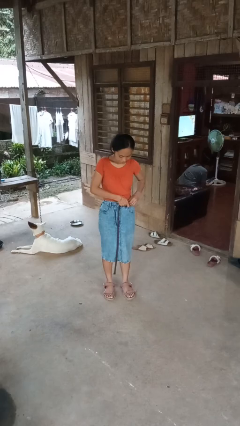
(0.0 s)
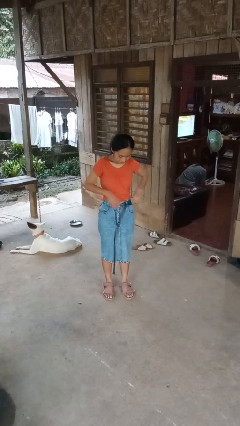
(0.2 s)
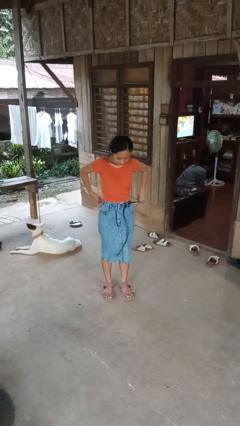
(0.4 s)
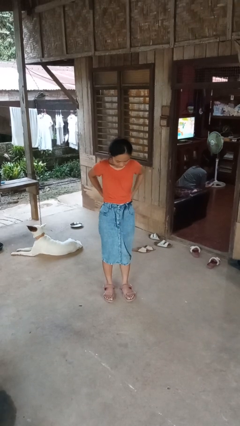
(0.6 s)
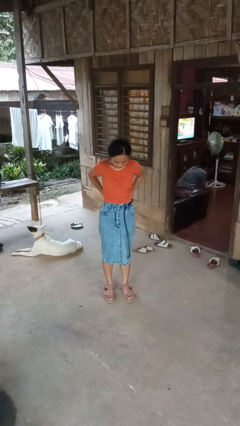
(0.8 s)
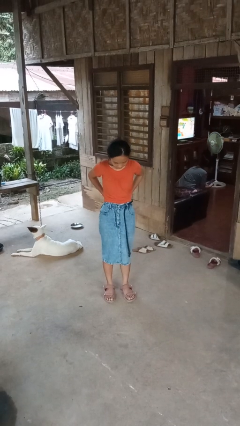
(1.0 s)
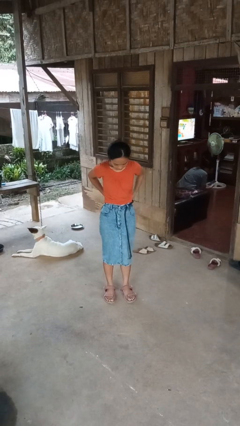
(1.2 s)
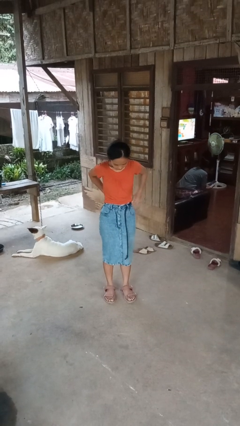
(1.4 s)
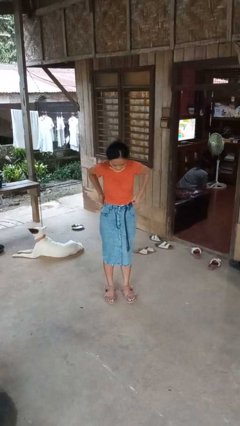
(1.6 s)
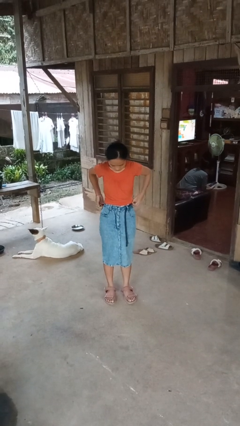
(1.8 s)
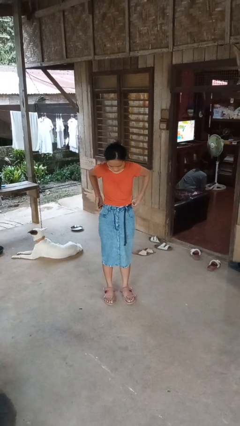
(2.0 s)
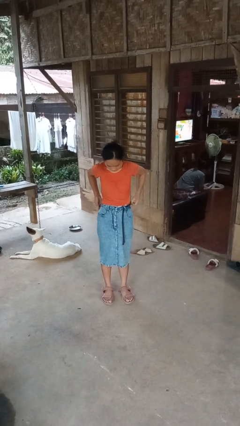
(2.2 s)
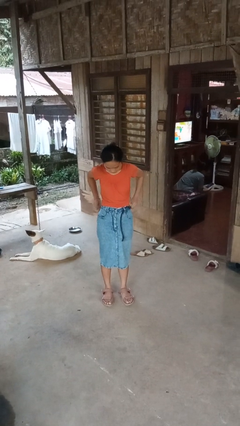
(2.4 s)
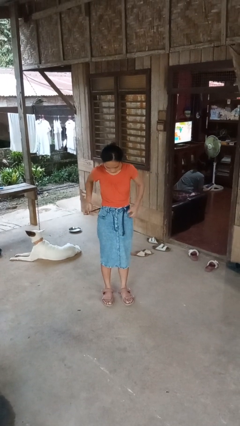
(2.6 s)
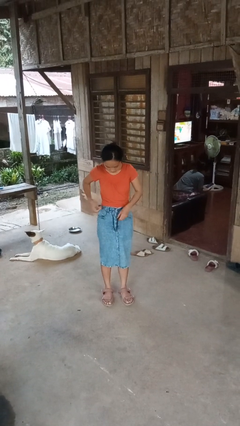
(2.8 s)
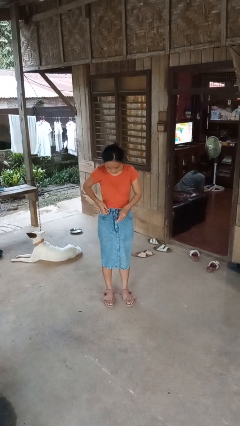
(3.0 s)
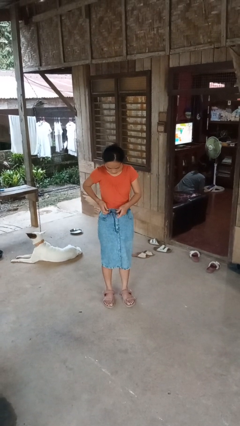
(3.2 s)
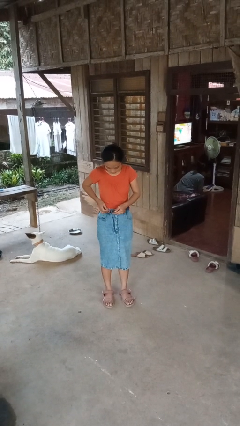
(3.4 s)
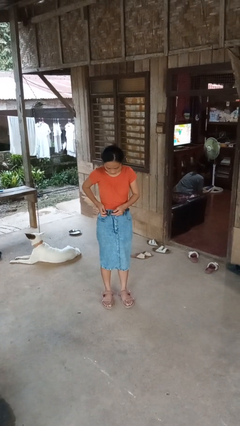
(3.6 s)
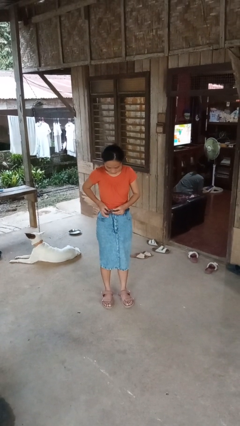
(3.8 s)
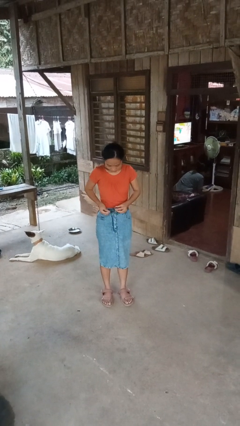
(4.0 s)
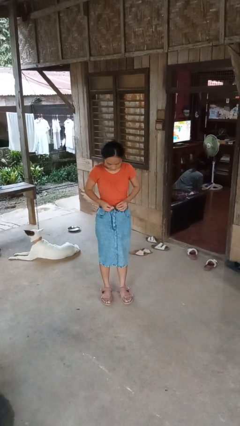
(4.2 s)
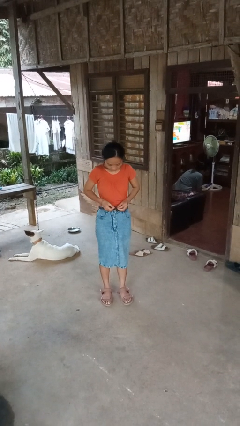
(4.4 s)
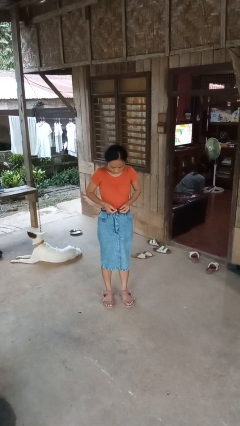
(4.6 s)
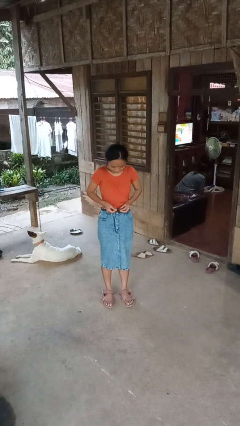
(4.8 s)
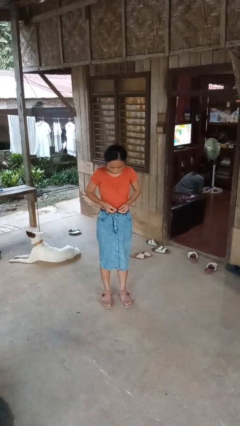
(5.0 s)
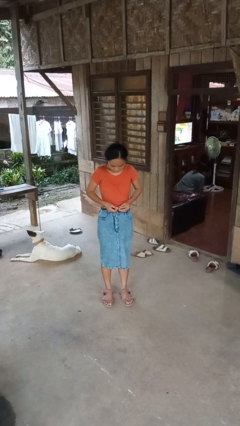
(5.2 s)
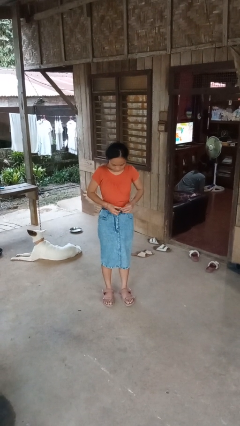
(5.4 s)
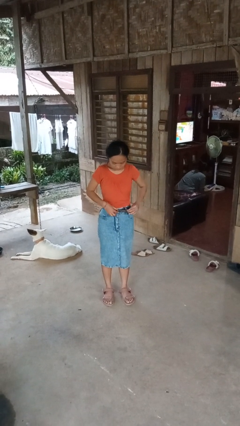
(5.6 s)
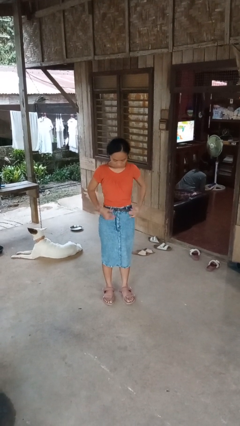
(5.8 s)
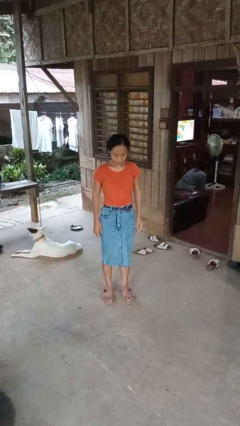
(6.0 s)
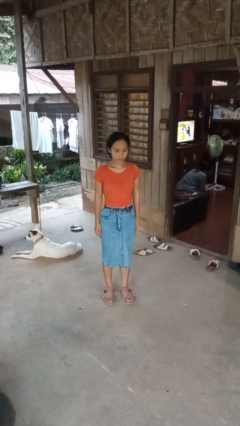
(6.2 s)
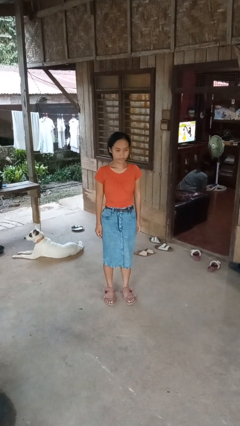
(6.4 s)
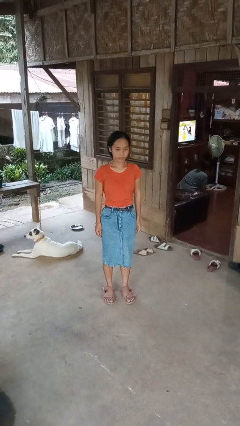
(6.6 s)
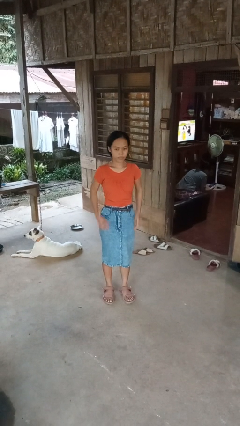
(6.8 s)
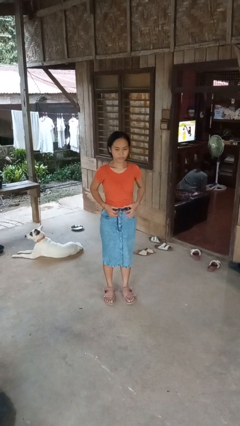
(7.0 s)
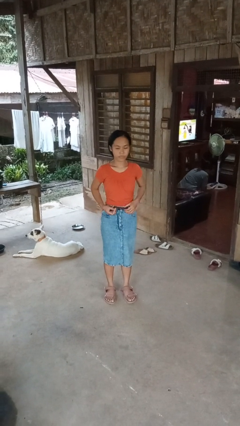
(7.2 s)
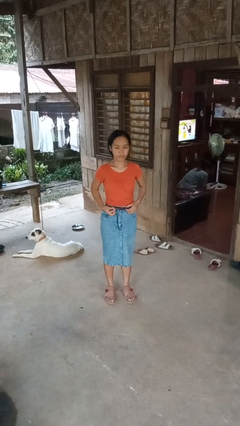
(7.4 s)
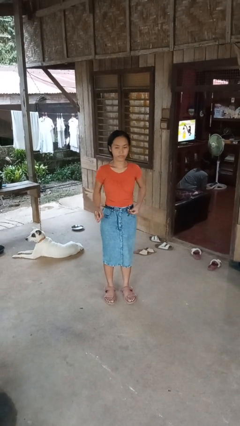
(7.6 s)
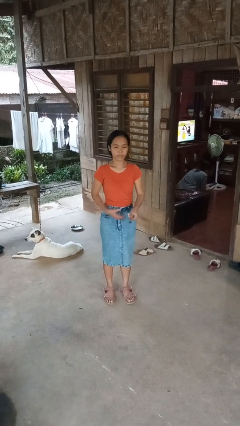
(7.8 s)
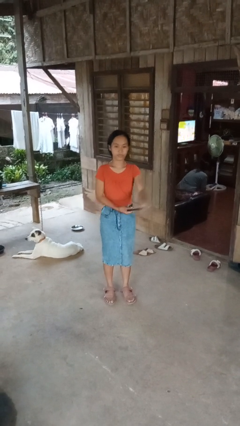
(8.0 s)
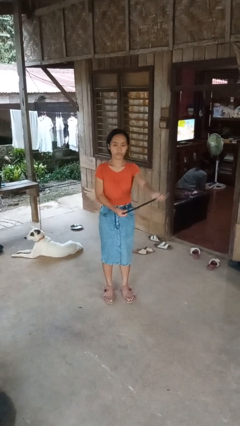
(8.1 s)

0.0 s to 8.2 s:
person puts on belt

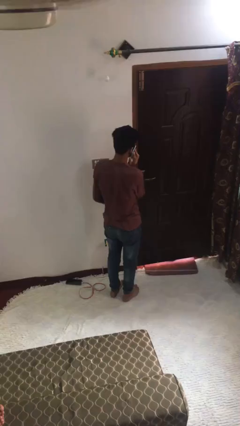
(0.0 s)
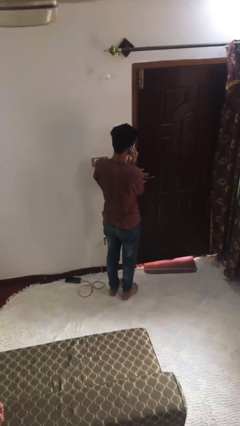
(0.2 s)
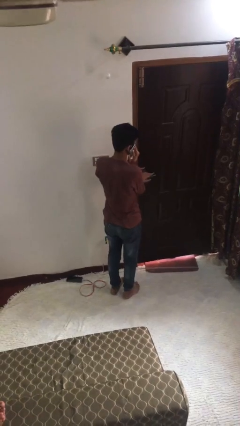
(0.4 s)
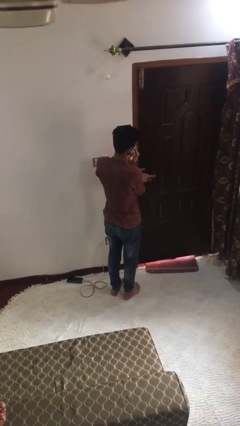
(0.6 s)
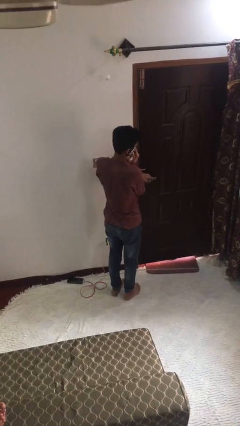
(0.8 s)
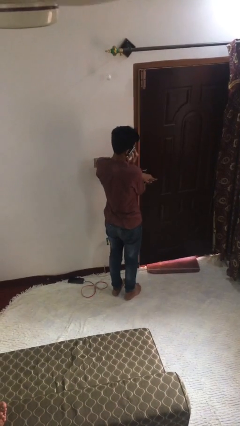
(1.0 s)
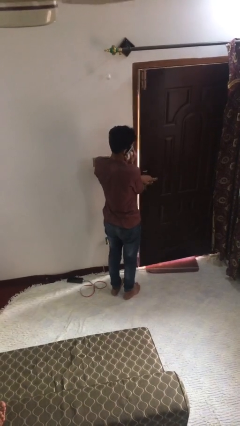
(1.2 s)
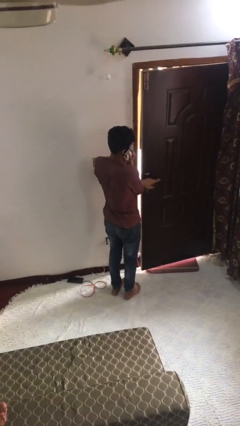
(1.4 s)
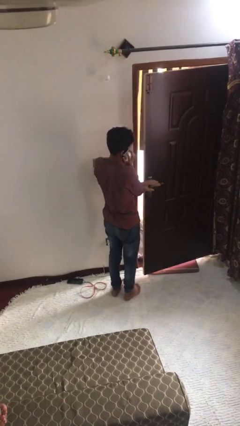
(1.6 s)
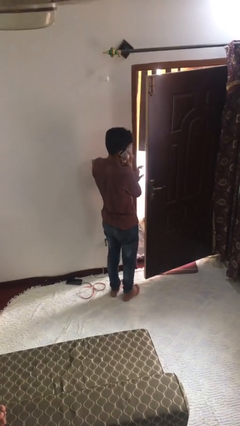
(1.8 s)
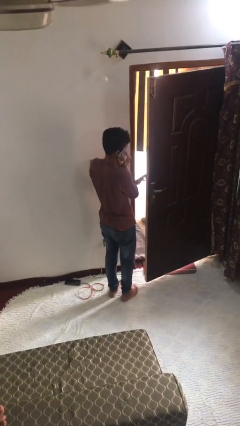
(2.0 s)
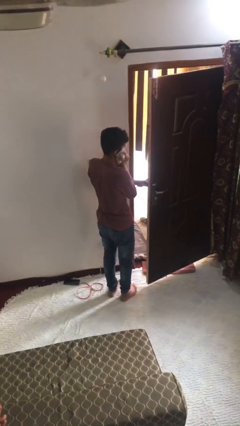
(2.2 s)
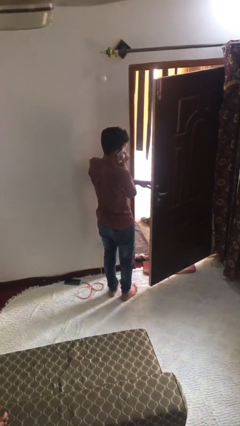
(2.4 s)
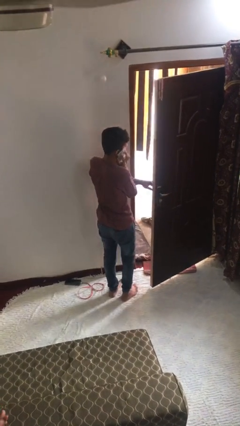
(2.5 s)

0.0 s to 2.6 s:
person opens facility door

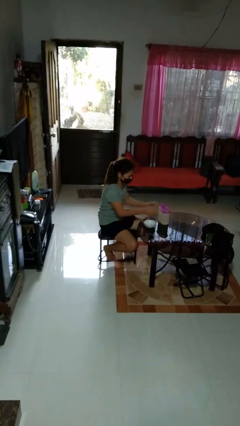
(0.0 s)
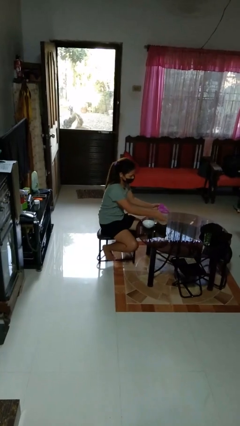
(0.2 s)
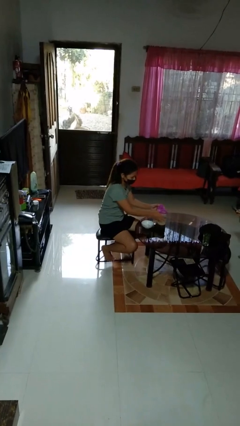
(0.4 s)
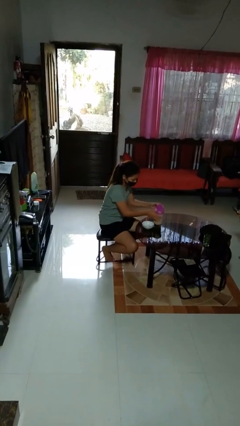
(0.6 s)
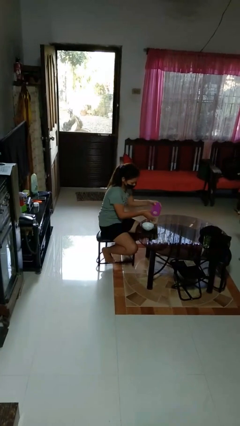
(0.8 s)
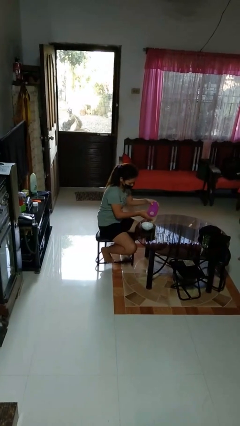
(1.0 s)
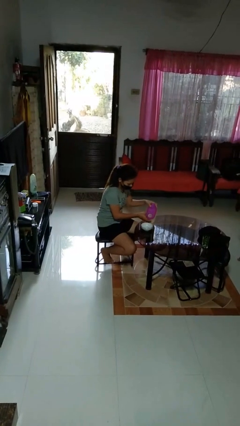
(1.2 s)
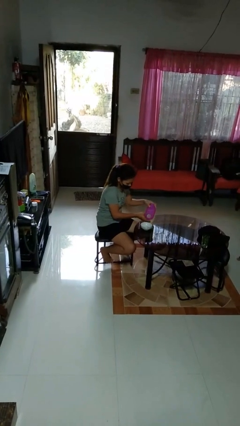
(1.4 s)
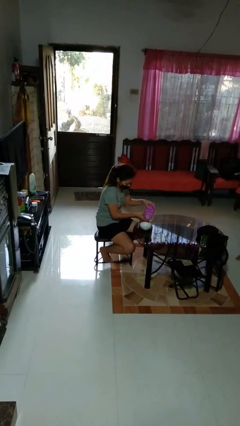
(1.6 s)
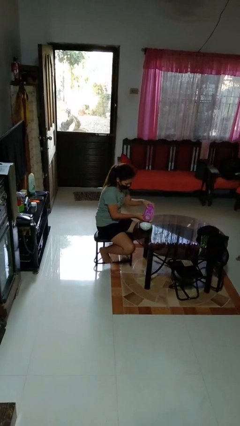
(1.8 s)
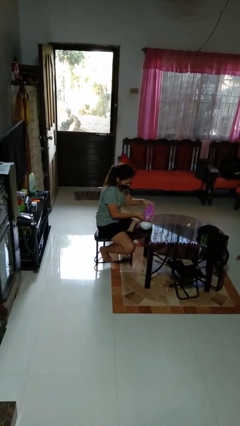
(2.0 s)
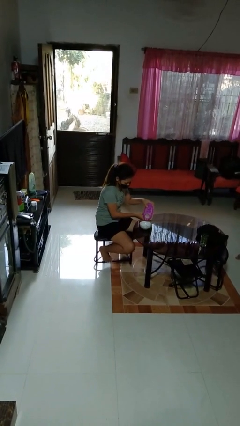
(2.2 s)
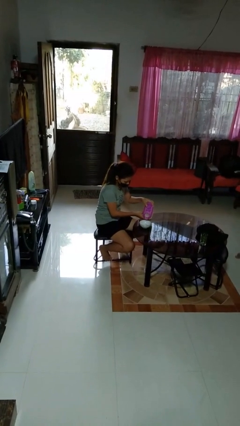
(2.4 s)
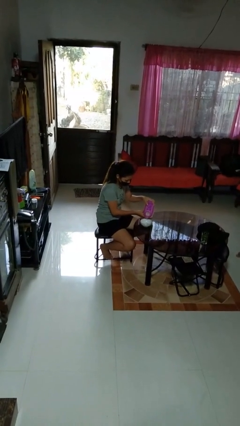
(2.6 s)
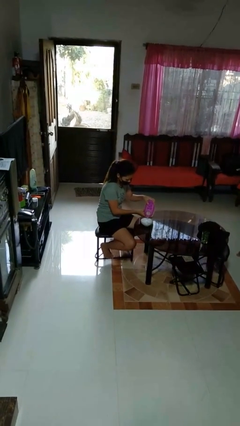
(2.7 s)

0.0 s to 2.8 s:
person pours into bowl

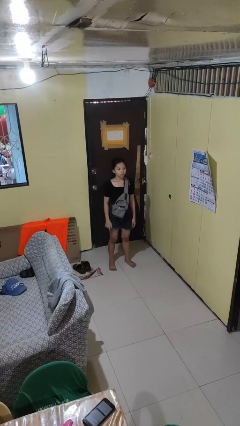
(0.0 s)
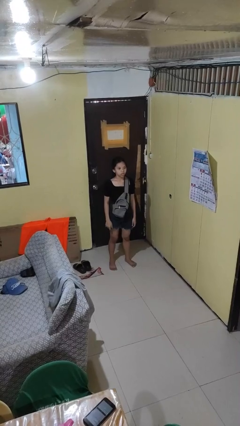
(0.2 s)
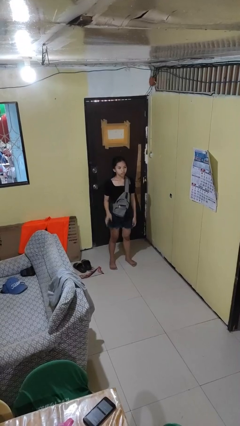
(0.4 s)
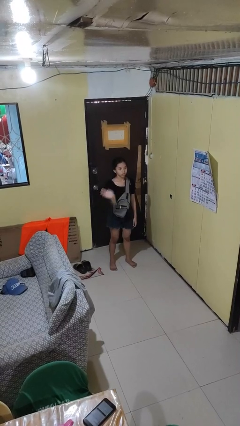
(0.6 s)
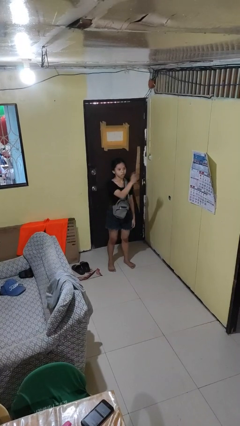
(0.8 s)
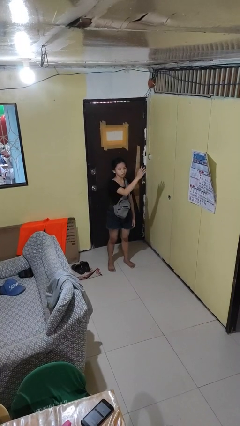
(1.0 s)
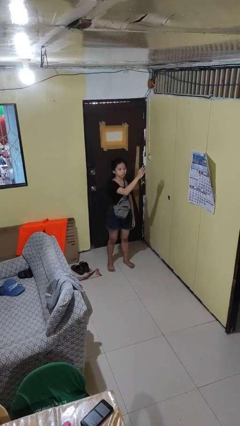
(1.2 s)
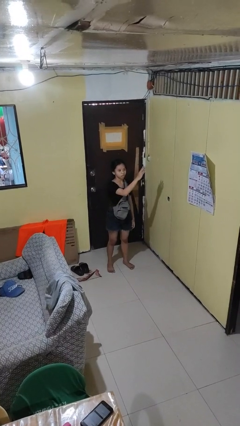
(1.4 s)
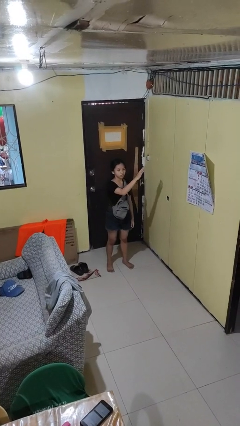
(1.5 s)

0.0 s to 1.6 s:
person gestures swipe left

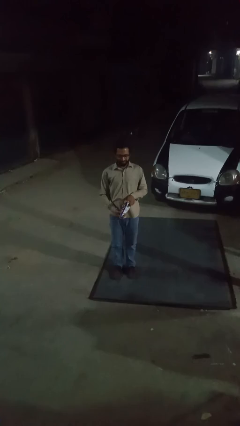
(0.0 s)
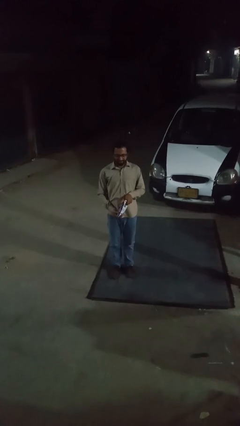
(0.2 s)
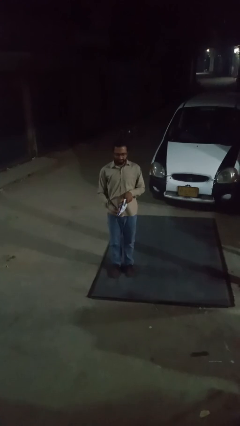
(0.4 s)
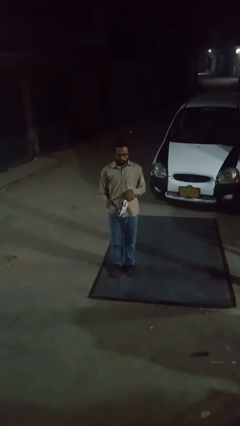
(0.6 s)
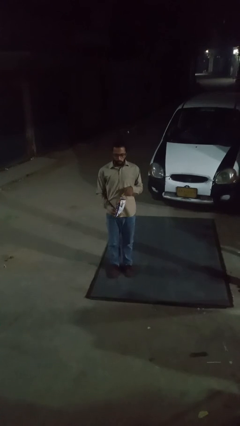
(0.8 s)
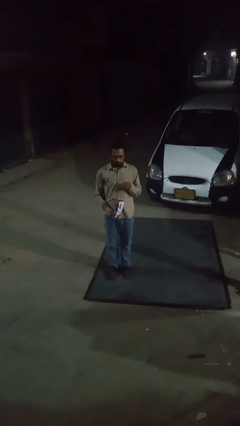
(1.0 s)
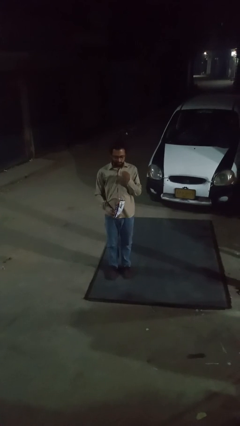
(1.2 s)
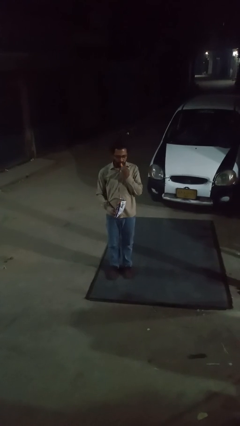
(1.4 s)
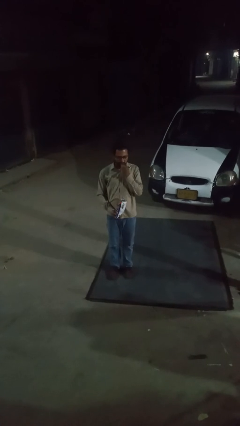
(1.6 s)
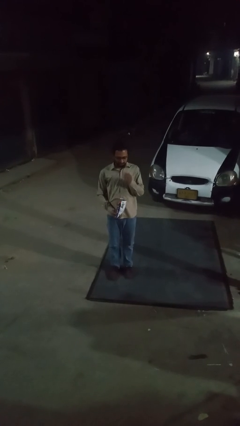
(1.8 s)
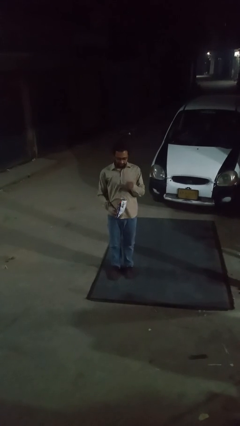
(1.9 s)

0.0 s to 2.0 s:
person eats snack from bag
